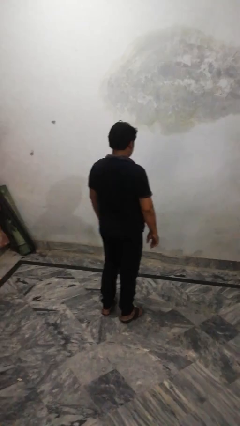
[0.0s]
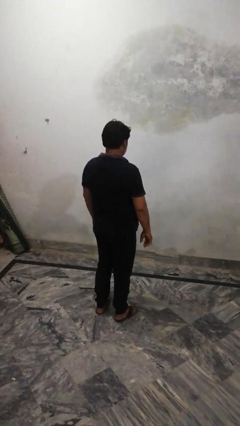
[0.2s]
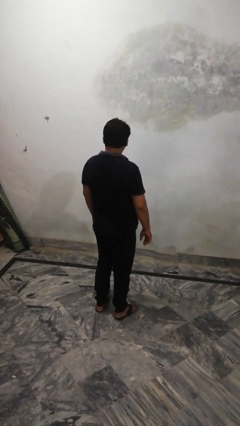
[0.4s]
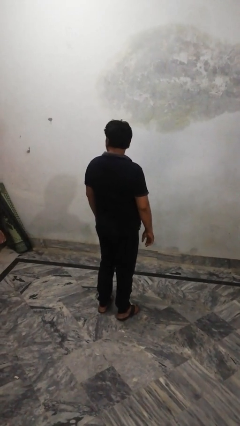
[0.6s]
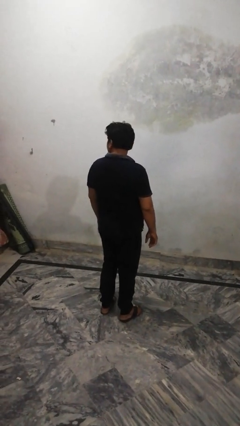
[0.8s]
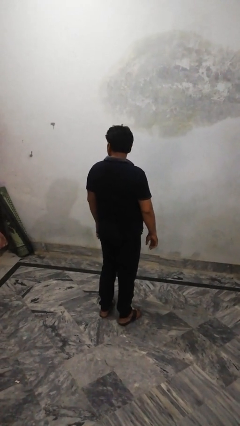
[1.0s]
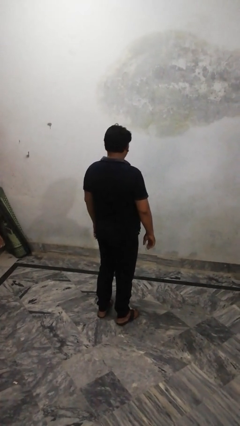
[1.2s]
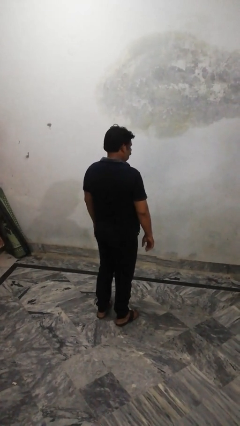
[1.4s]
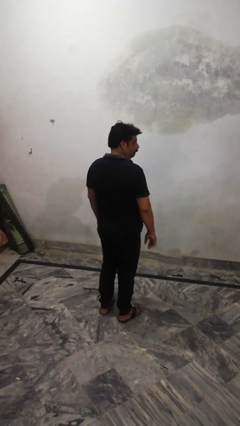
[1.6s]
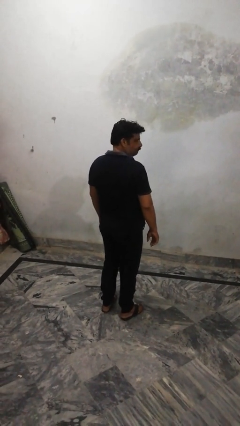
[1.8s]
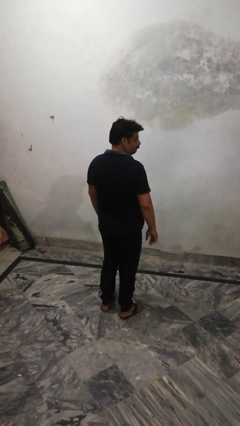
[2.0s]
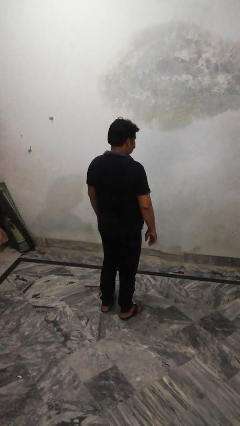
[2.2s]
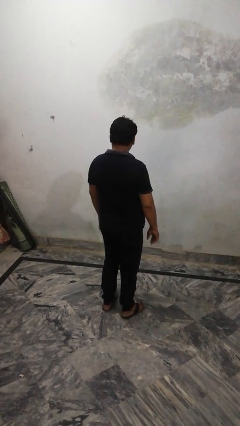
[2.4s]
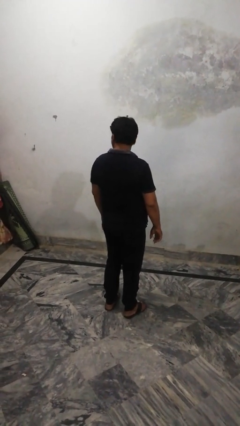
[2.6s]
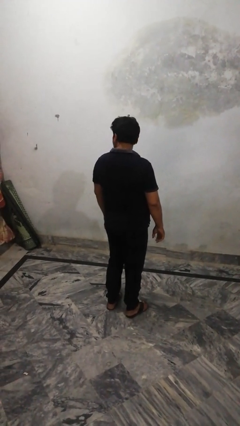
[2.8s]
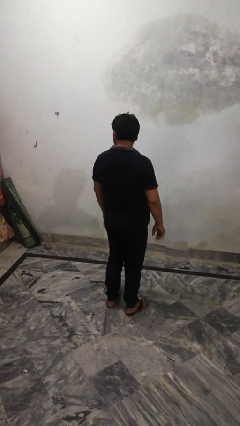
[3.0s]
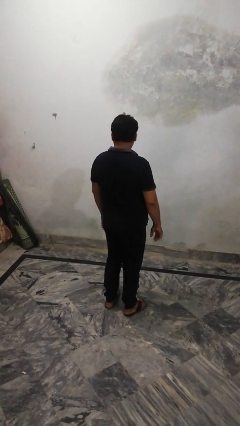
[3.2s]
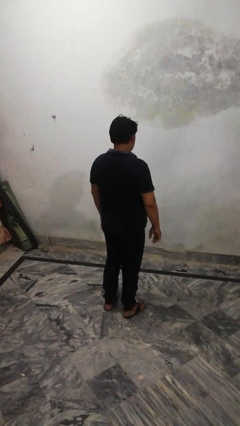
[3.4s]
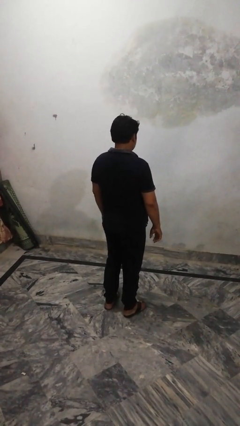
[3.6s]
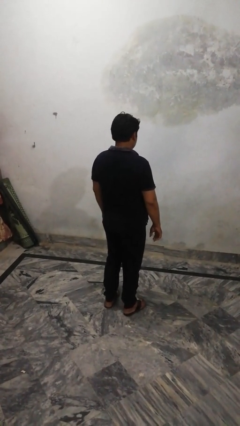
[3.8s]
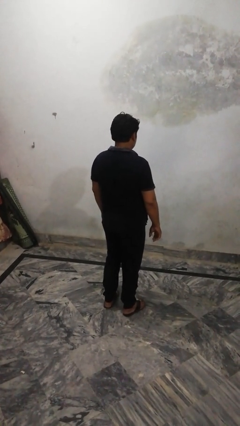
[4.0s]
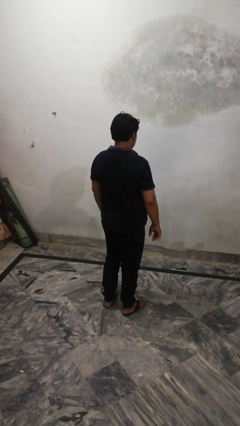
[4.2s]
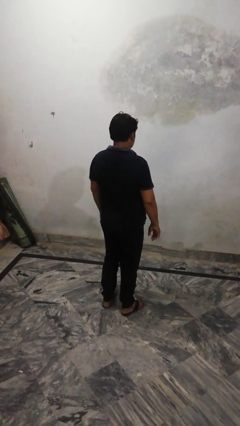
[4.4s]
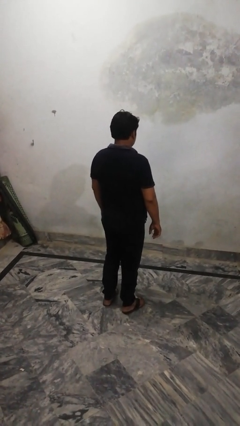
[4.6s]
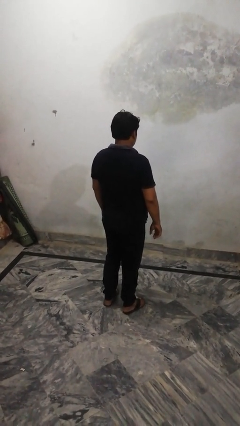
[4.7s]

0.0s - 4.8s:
person shakes head

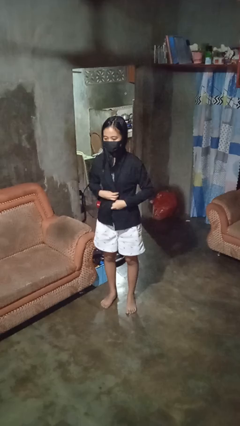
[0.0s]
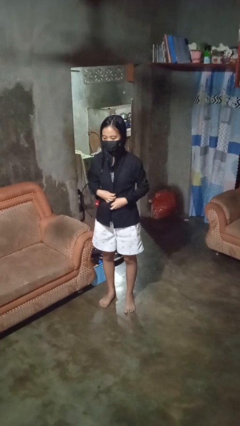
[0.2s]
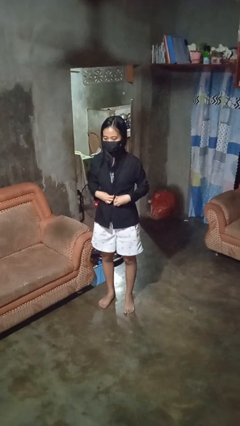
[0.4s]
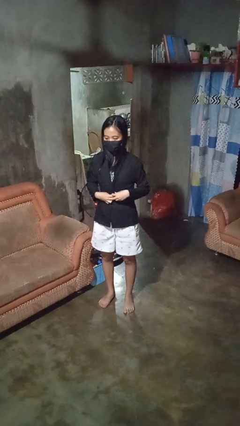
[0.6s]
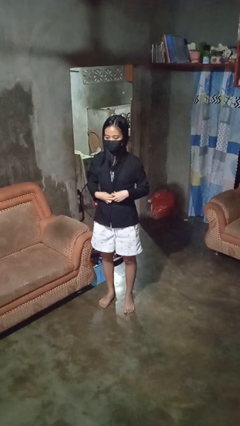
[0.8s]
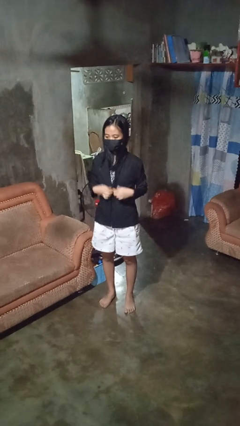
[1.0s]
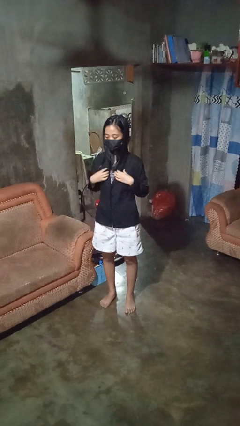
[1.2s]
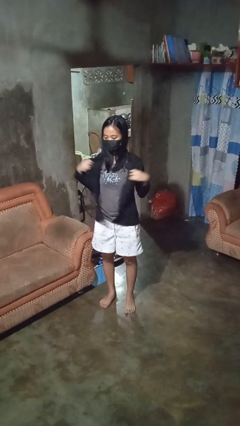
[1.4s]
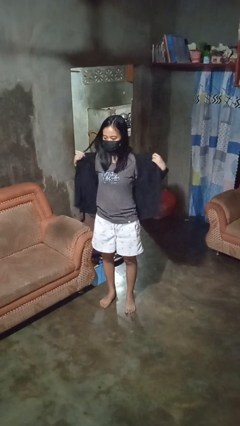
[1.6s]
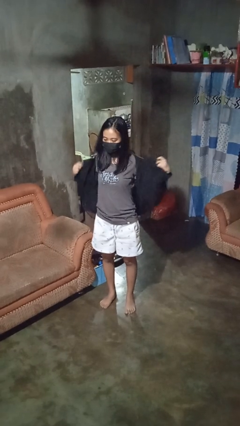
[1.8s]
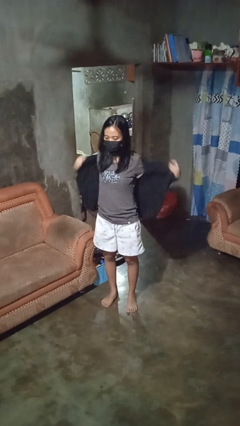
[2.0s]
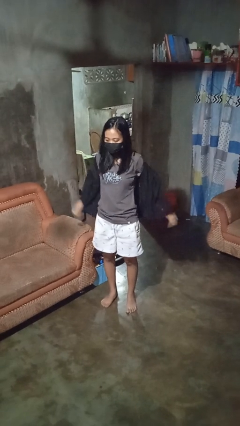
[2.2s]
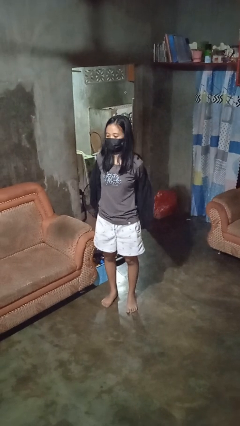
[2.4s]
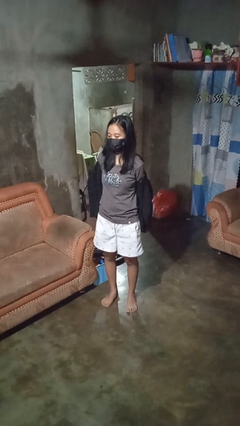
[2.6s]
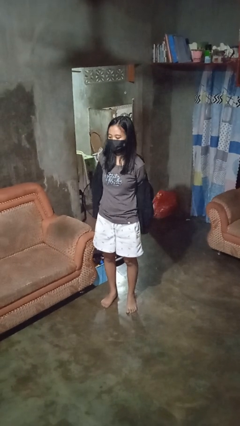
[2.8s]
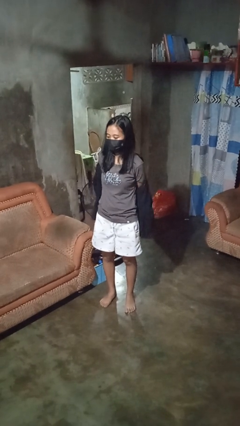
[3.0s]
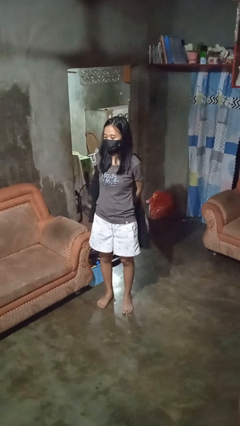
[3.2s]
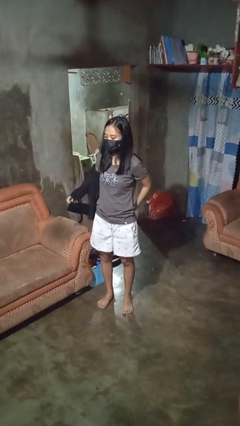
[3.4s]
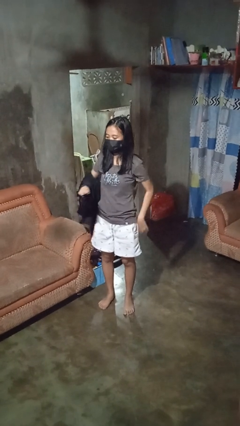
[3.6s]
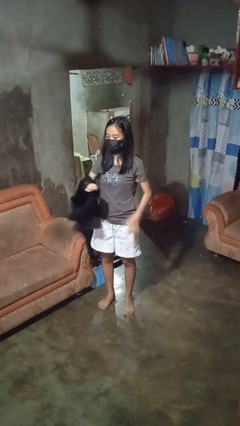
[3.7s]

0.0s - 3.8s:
person takes off shirt

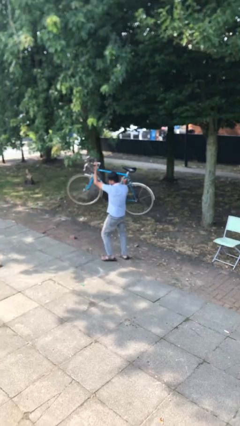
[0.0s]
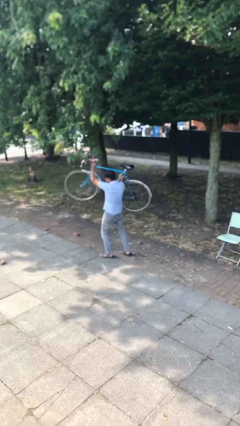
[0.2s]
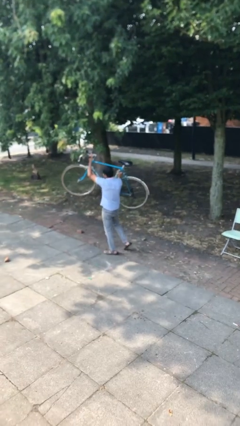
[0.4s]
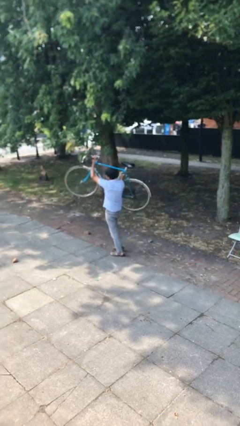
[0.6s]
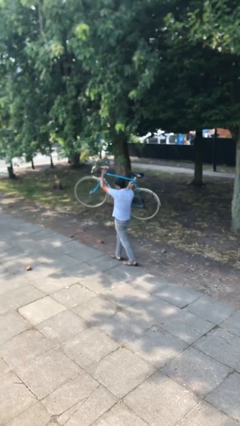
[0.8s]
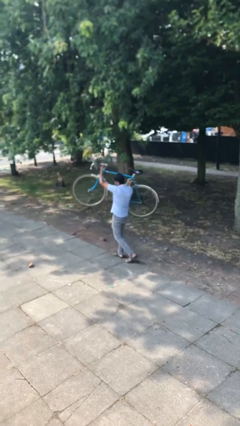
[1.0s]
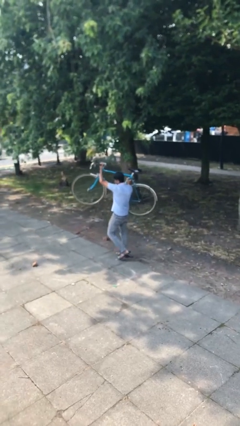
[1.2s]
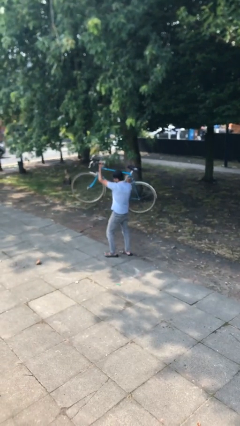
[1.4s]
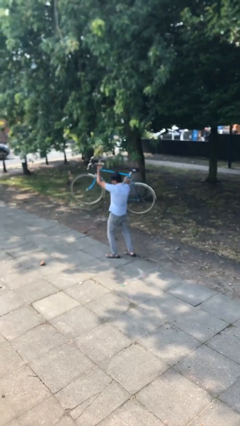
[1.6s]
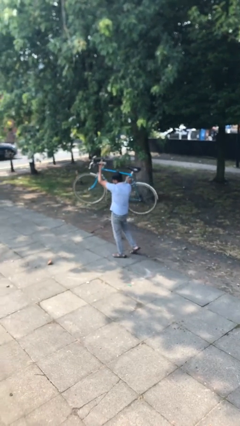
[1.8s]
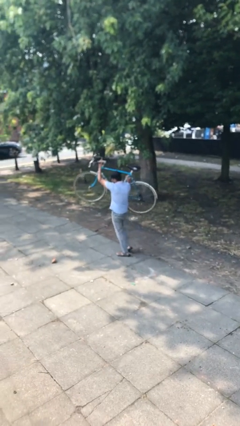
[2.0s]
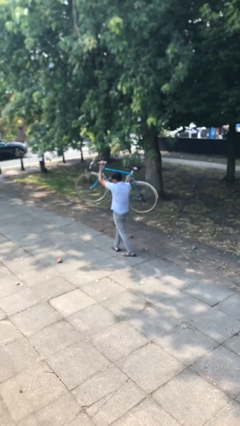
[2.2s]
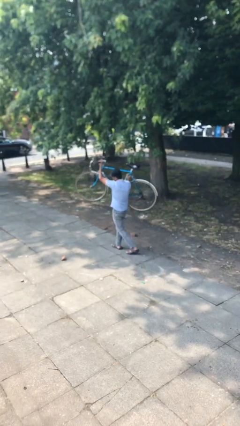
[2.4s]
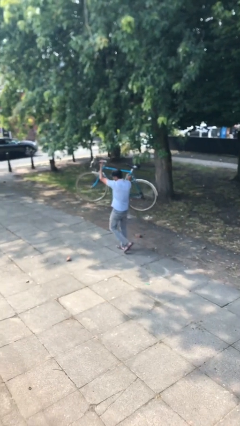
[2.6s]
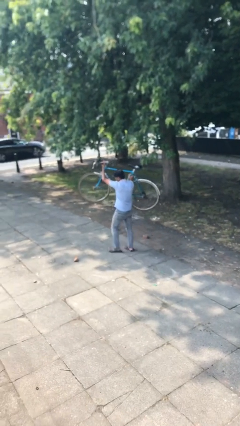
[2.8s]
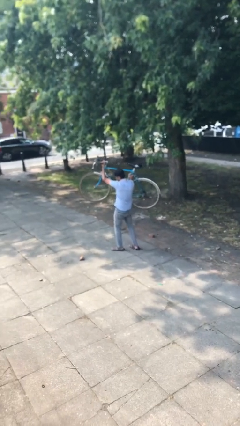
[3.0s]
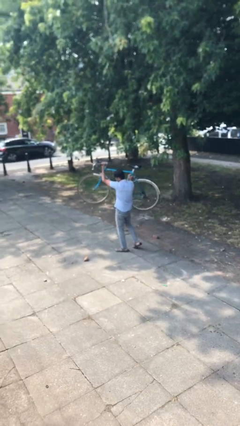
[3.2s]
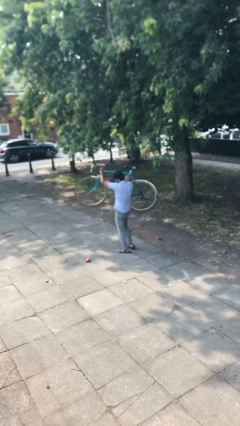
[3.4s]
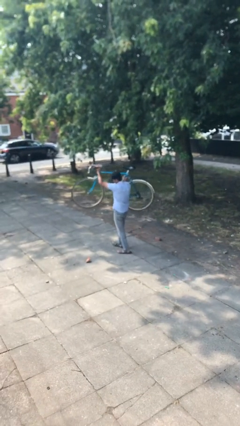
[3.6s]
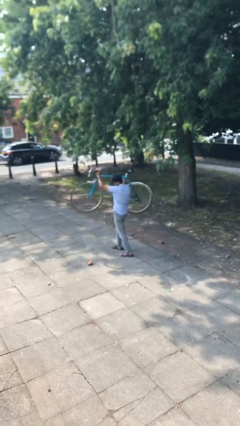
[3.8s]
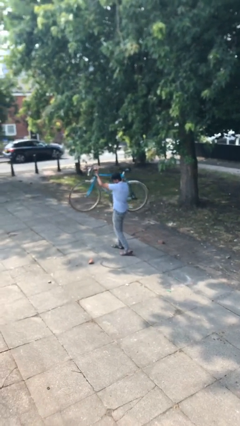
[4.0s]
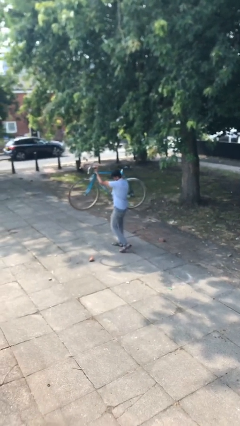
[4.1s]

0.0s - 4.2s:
person carries heavy object

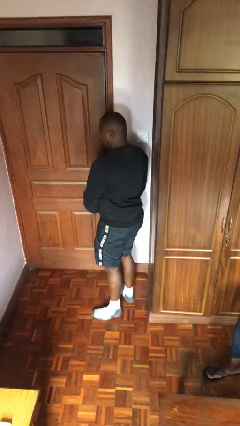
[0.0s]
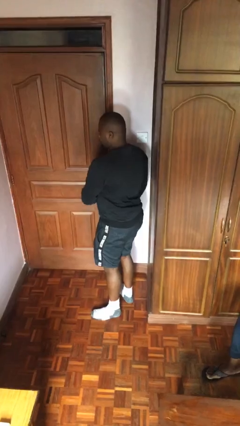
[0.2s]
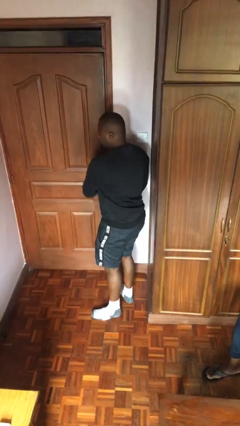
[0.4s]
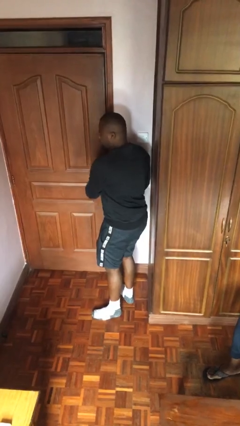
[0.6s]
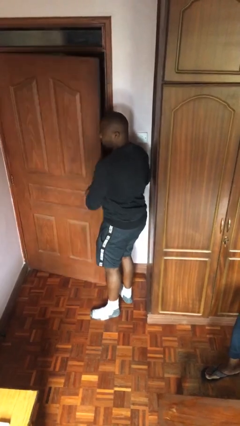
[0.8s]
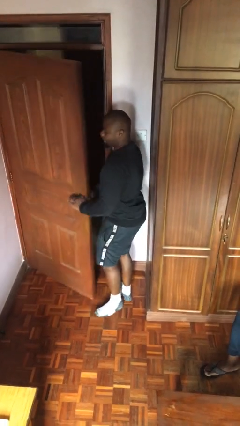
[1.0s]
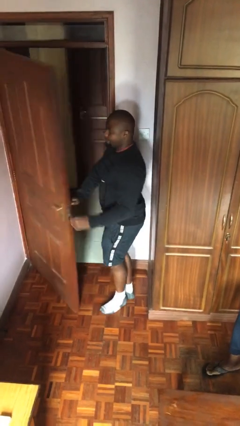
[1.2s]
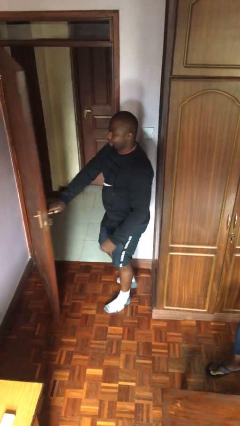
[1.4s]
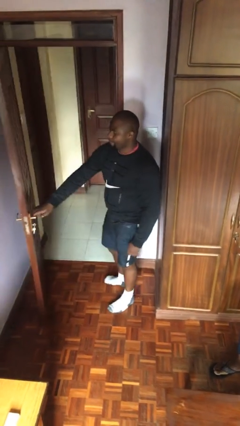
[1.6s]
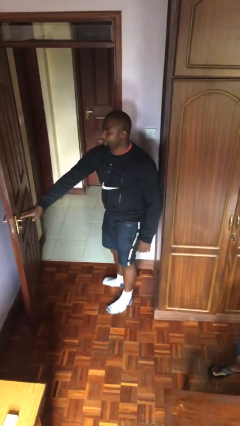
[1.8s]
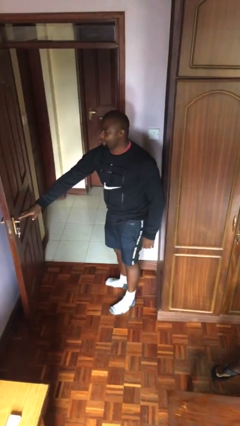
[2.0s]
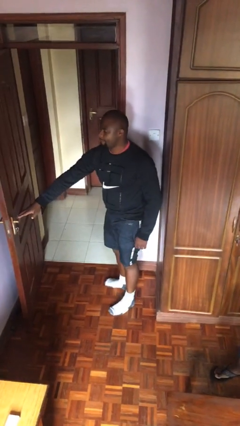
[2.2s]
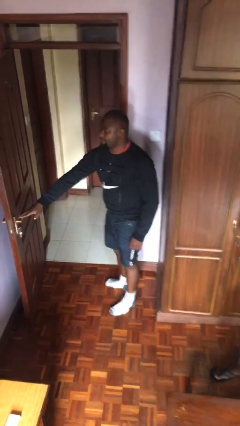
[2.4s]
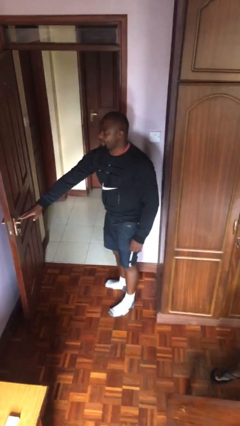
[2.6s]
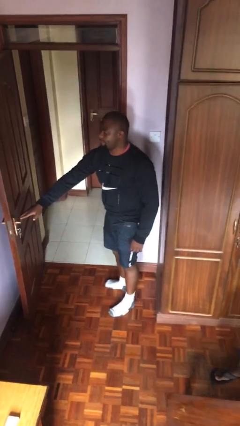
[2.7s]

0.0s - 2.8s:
person opens facility door

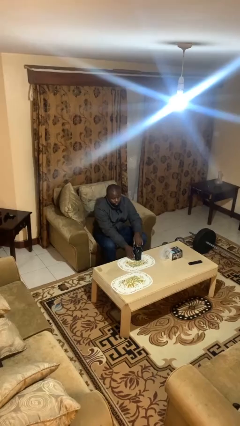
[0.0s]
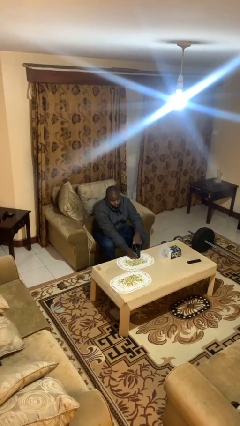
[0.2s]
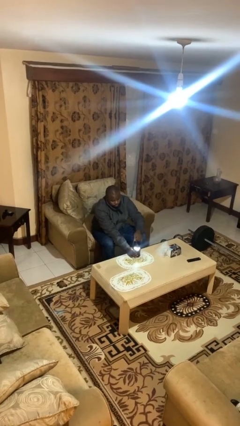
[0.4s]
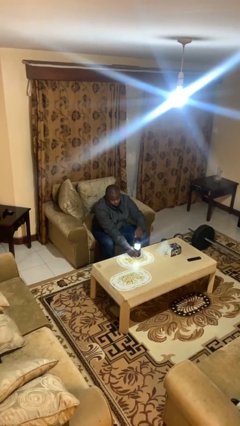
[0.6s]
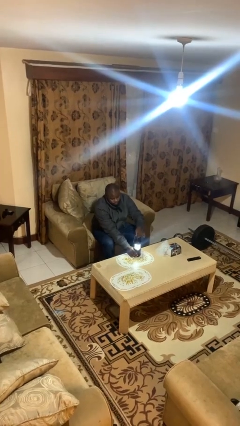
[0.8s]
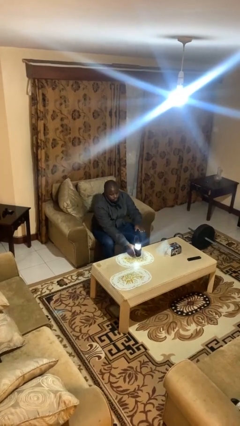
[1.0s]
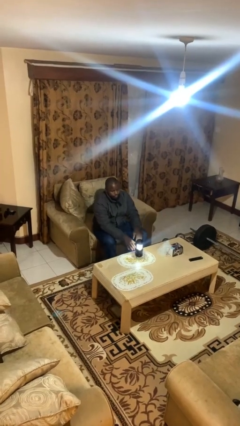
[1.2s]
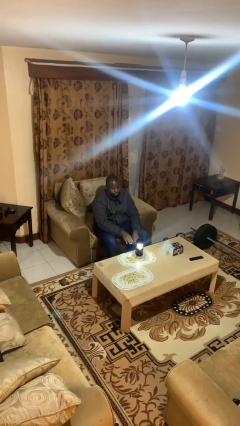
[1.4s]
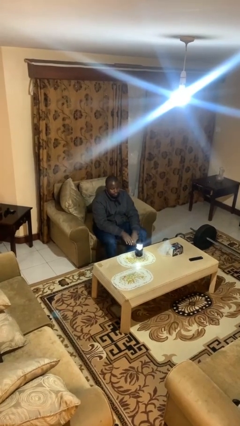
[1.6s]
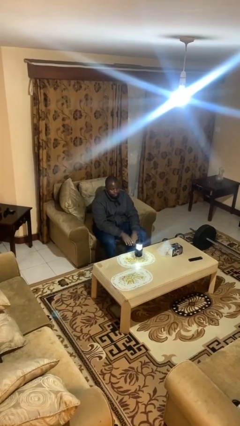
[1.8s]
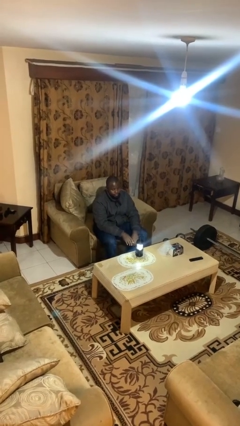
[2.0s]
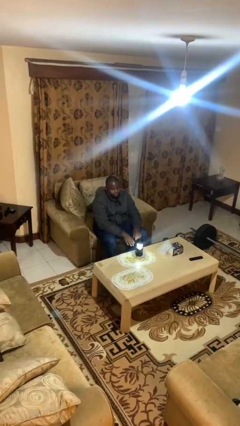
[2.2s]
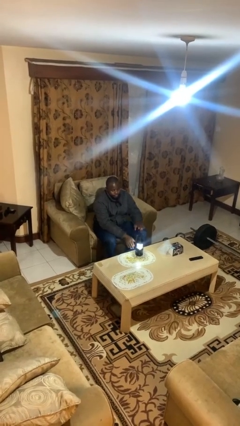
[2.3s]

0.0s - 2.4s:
person turns on lamp
